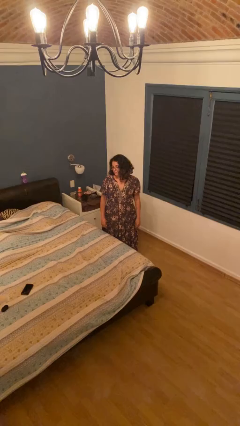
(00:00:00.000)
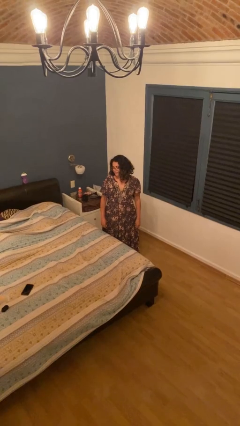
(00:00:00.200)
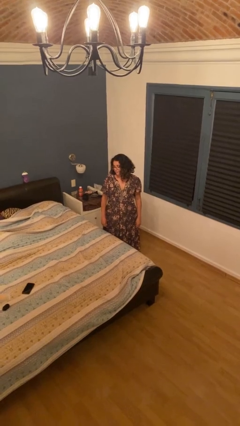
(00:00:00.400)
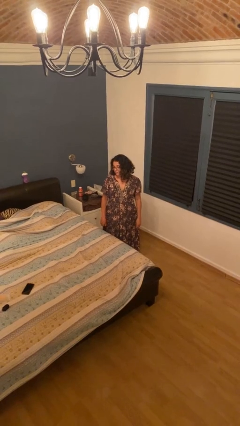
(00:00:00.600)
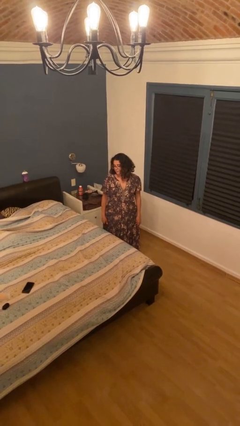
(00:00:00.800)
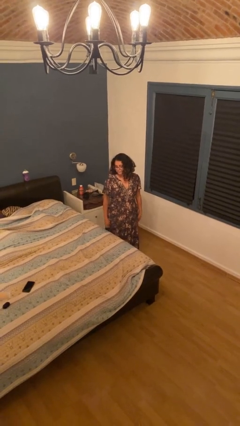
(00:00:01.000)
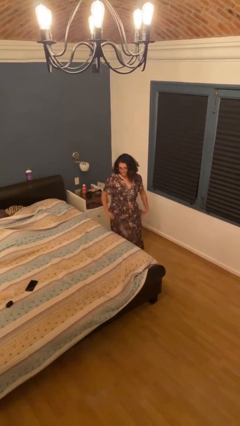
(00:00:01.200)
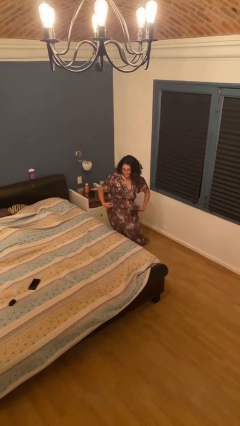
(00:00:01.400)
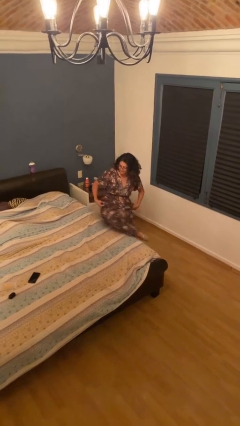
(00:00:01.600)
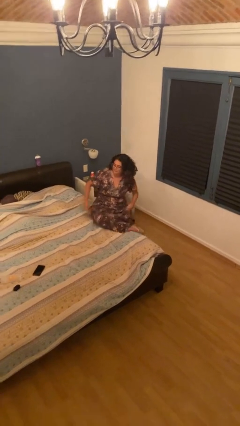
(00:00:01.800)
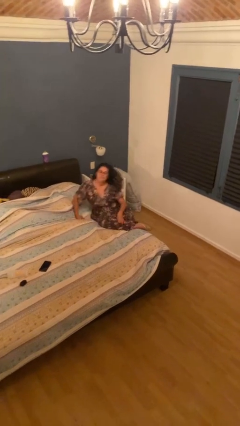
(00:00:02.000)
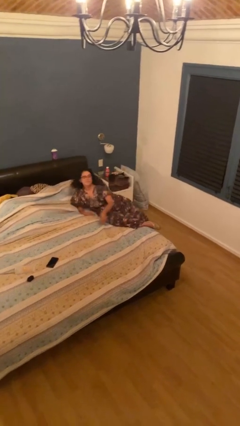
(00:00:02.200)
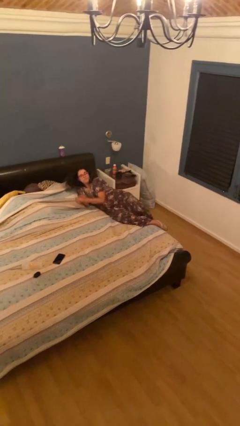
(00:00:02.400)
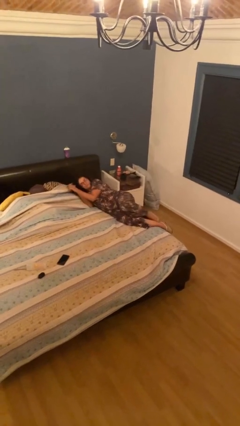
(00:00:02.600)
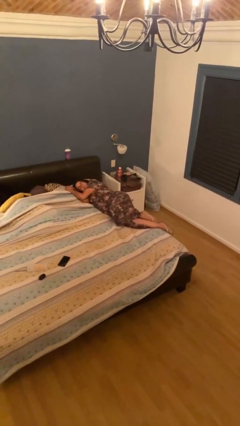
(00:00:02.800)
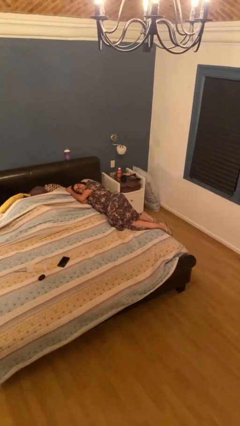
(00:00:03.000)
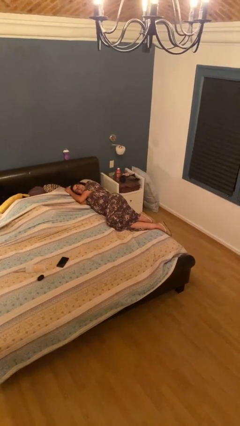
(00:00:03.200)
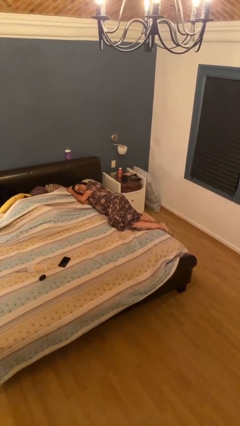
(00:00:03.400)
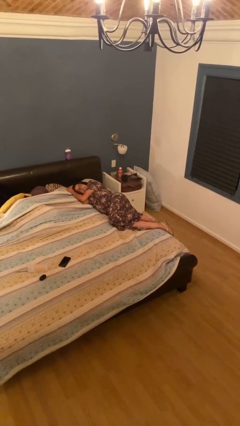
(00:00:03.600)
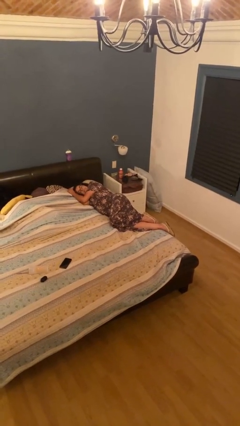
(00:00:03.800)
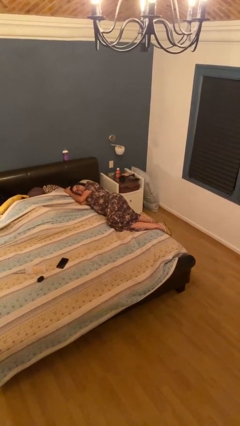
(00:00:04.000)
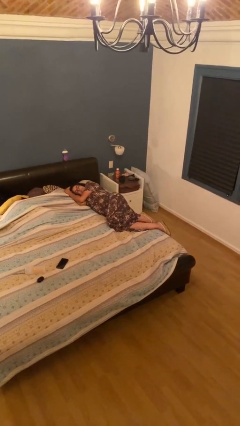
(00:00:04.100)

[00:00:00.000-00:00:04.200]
person lies down on bed

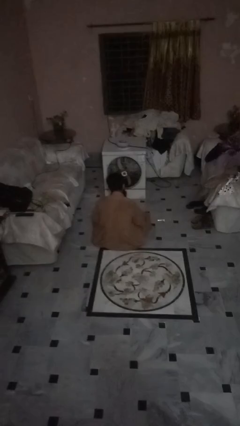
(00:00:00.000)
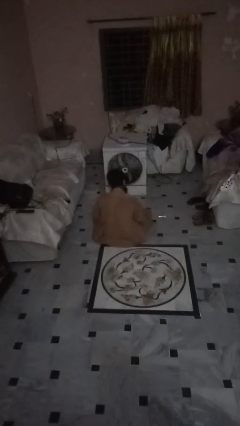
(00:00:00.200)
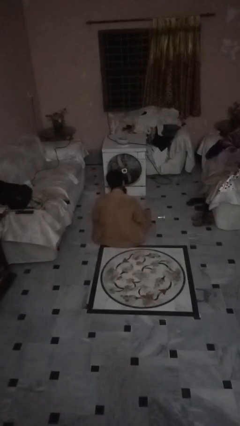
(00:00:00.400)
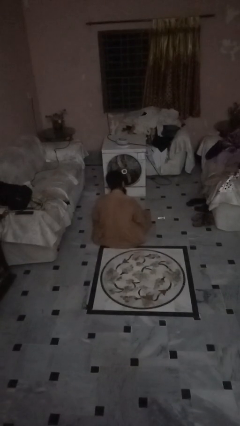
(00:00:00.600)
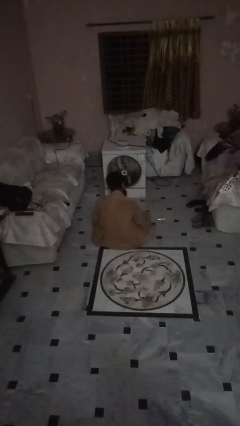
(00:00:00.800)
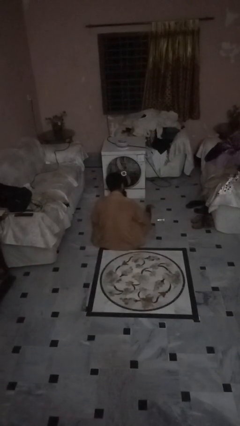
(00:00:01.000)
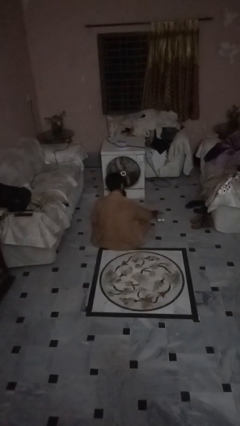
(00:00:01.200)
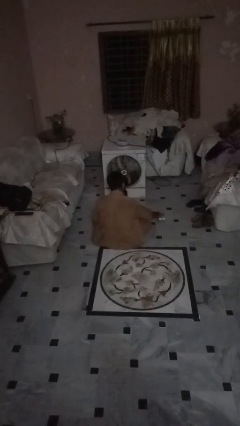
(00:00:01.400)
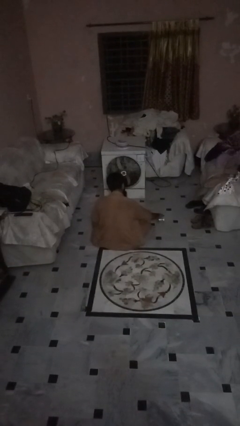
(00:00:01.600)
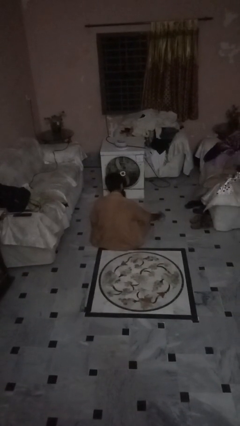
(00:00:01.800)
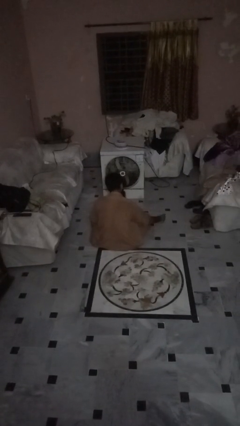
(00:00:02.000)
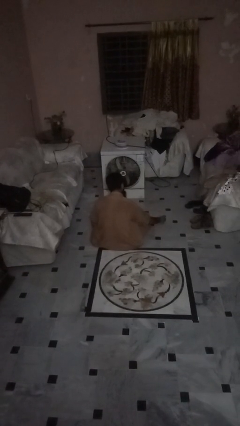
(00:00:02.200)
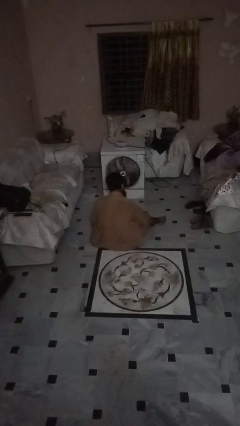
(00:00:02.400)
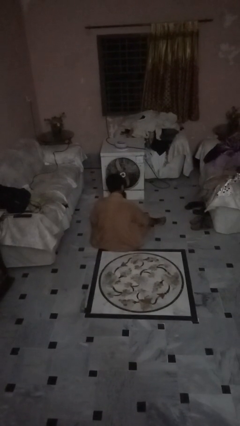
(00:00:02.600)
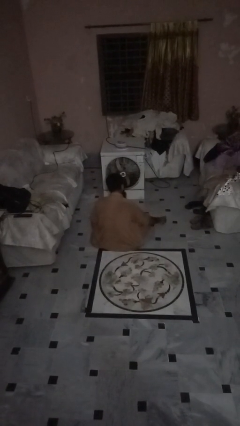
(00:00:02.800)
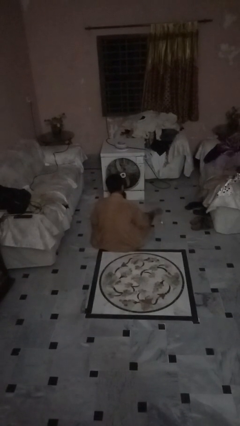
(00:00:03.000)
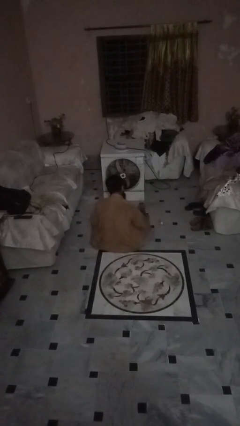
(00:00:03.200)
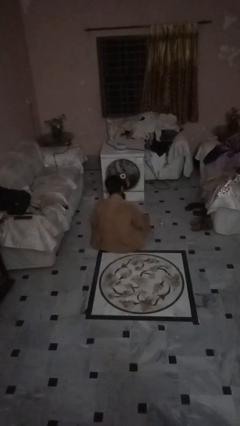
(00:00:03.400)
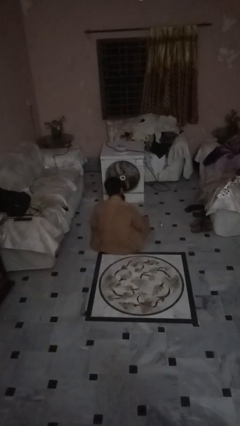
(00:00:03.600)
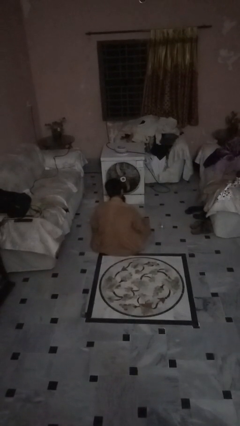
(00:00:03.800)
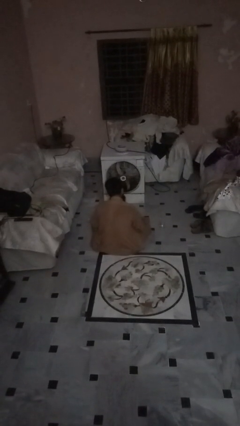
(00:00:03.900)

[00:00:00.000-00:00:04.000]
person sets upright glass

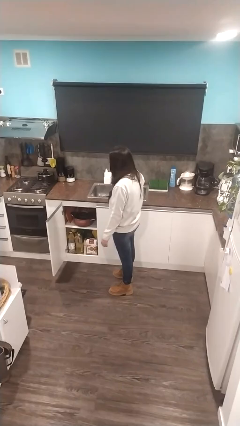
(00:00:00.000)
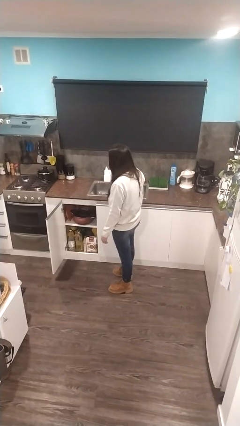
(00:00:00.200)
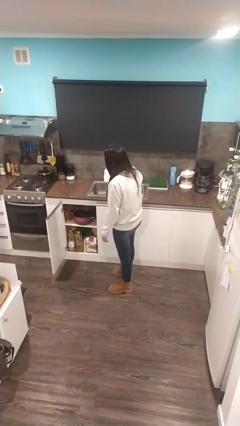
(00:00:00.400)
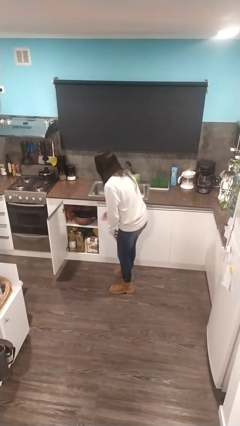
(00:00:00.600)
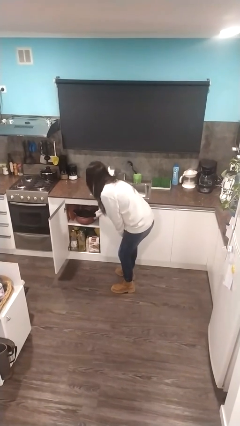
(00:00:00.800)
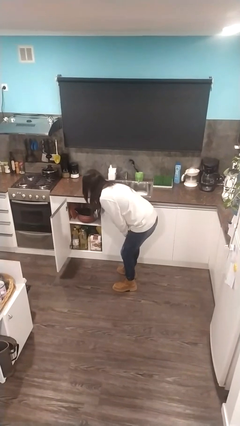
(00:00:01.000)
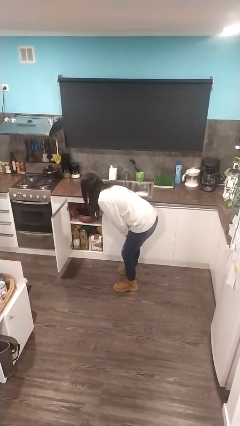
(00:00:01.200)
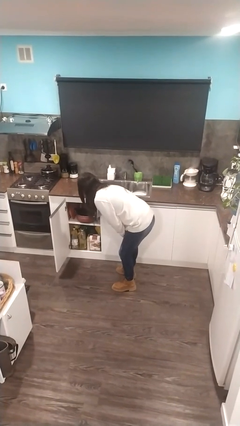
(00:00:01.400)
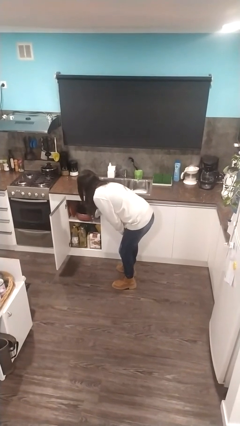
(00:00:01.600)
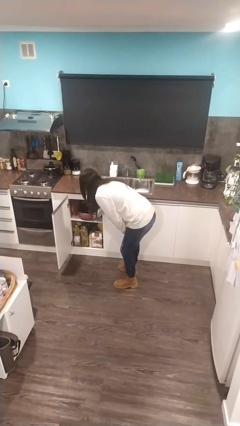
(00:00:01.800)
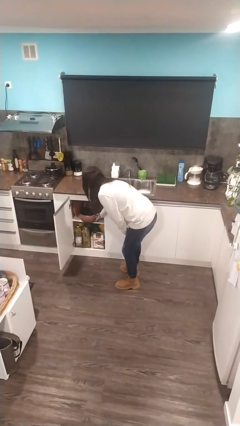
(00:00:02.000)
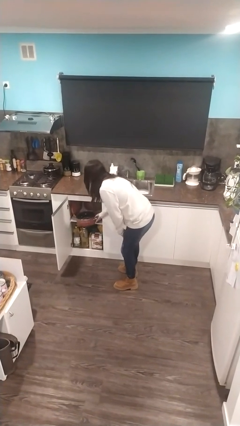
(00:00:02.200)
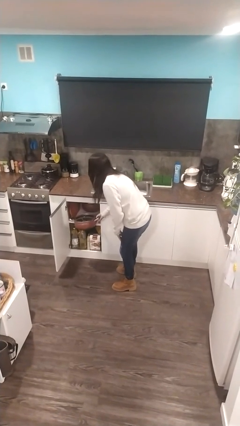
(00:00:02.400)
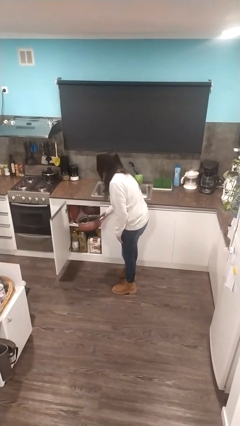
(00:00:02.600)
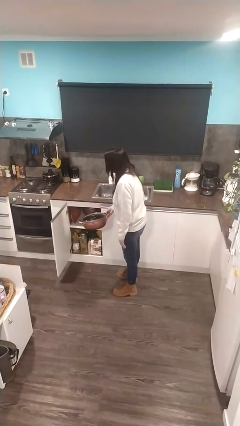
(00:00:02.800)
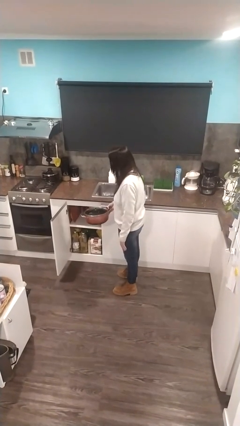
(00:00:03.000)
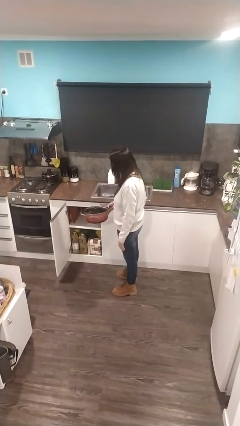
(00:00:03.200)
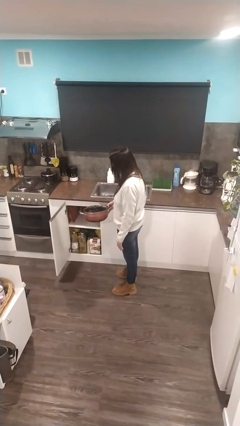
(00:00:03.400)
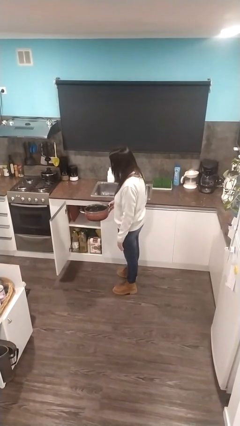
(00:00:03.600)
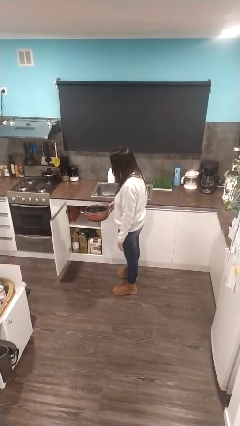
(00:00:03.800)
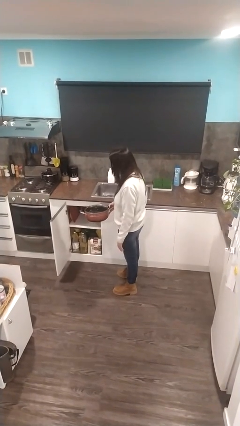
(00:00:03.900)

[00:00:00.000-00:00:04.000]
person picks up object from cabinet

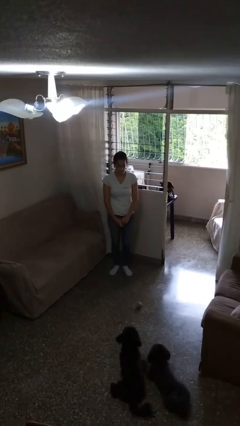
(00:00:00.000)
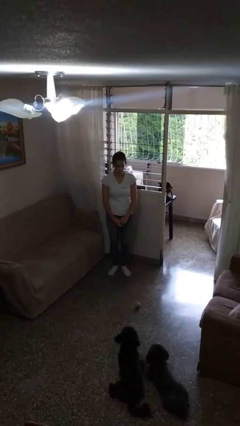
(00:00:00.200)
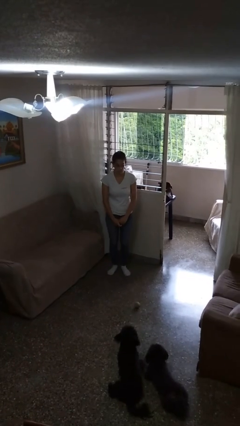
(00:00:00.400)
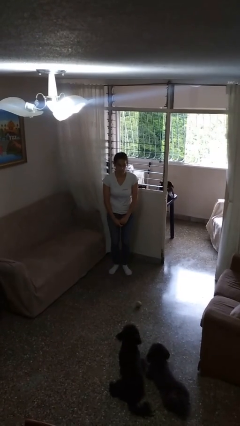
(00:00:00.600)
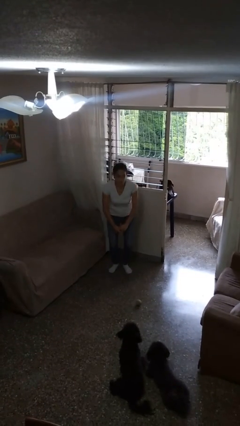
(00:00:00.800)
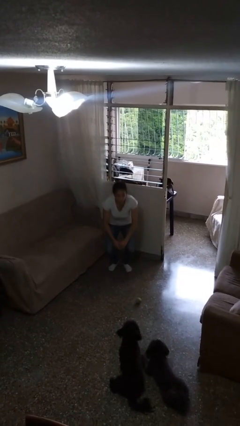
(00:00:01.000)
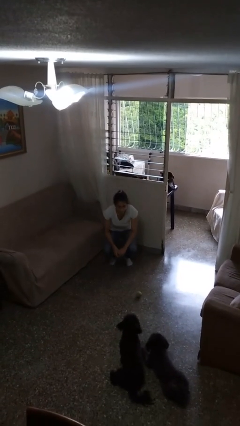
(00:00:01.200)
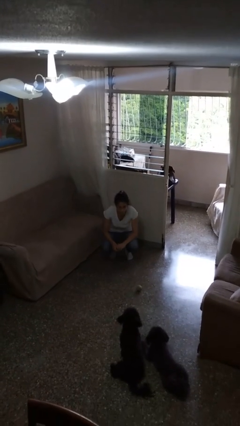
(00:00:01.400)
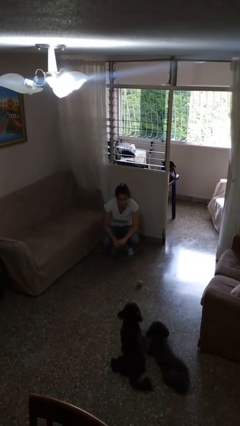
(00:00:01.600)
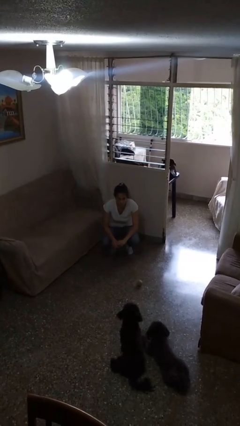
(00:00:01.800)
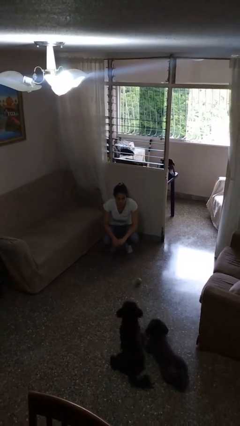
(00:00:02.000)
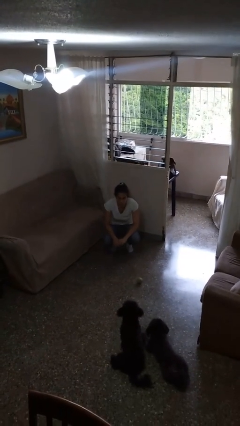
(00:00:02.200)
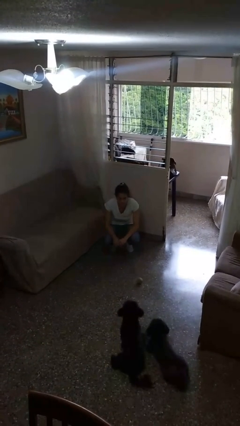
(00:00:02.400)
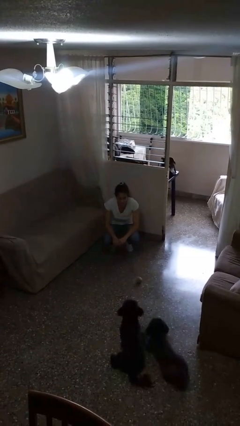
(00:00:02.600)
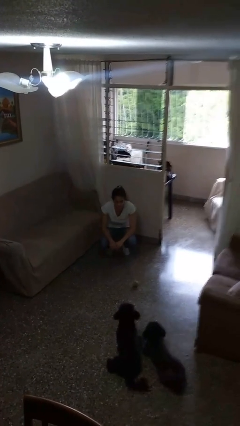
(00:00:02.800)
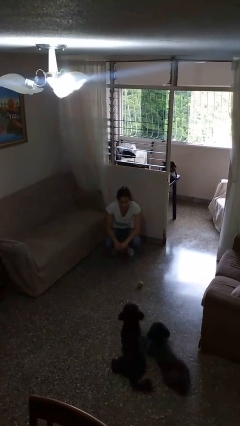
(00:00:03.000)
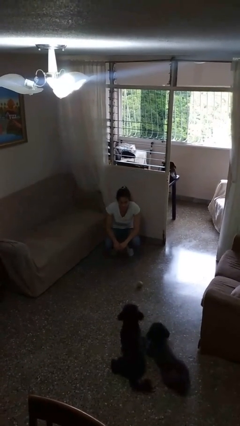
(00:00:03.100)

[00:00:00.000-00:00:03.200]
person squats

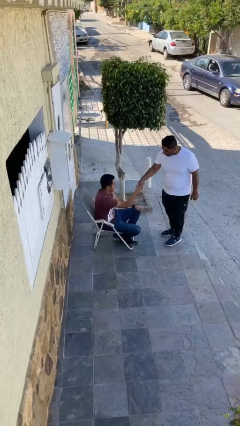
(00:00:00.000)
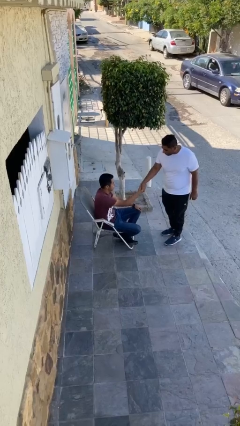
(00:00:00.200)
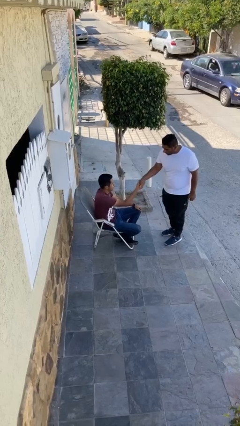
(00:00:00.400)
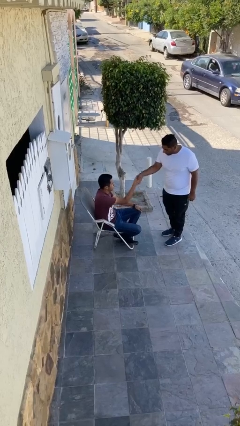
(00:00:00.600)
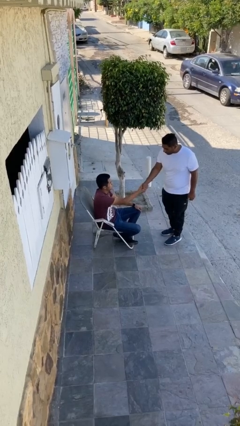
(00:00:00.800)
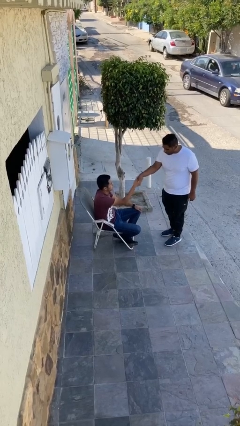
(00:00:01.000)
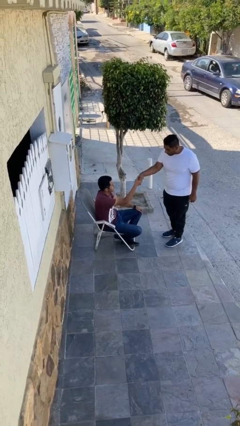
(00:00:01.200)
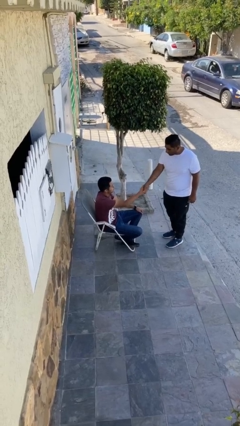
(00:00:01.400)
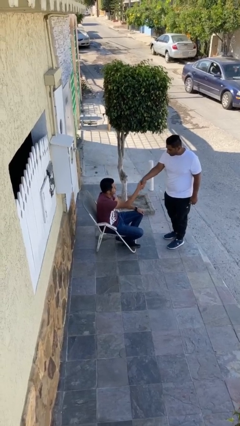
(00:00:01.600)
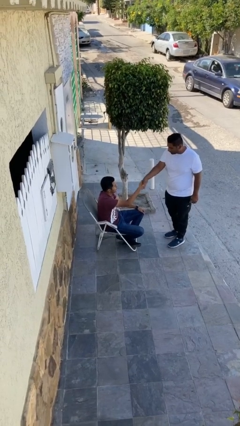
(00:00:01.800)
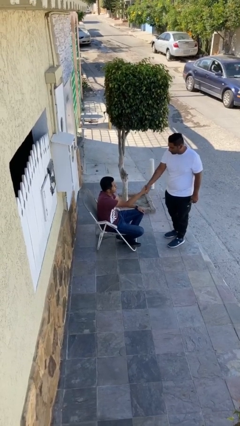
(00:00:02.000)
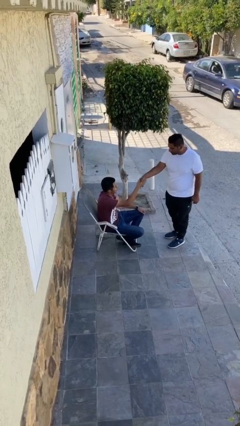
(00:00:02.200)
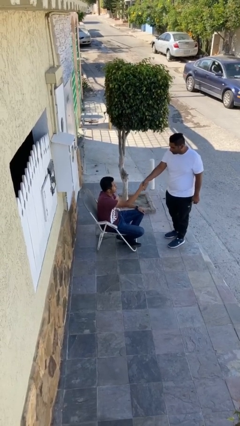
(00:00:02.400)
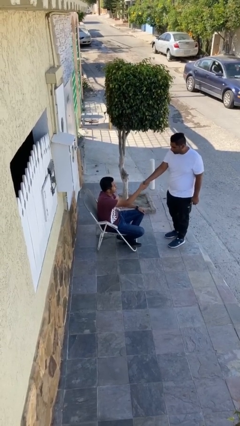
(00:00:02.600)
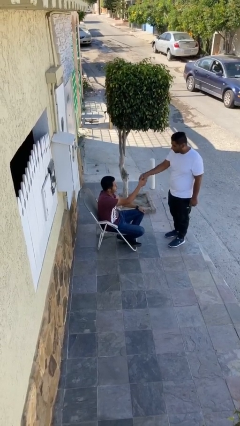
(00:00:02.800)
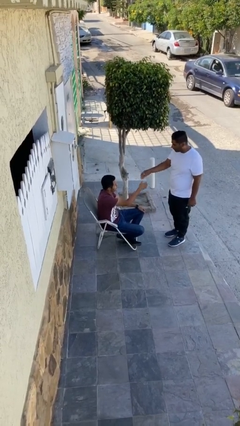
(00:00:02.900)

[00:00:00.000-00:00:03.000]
person shakes hand
